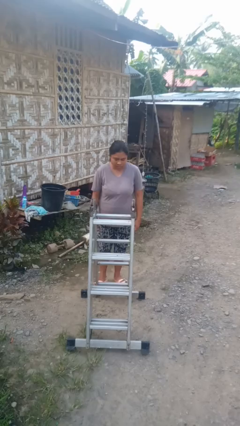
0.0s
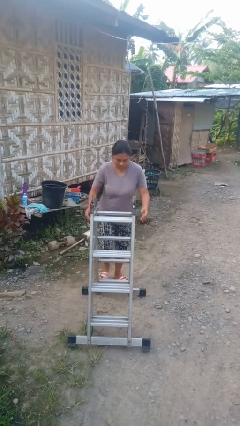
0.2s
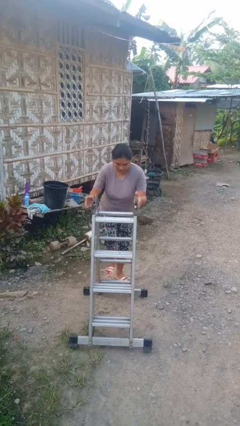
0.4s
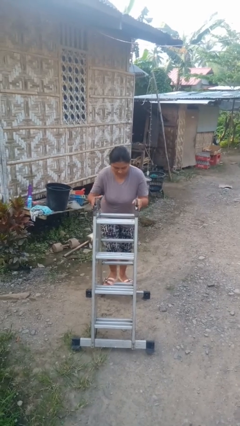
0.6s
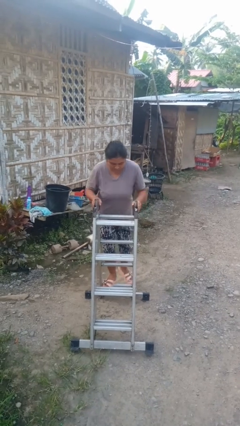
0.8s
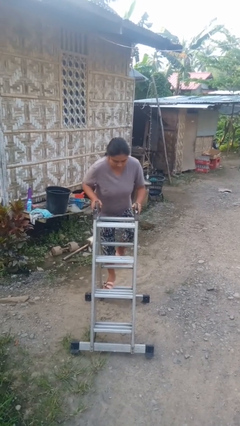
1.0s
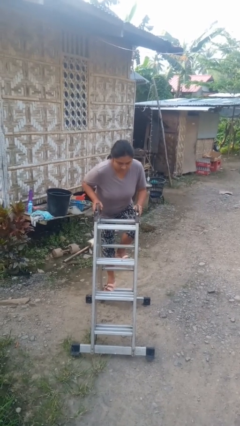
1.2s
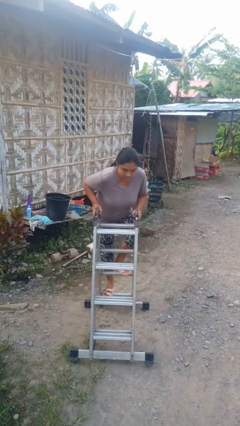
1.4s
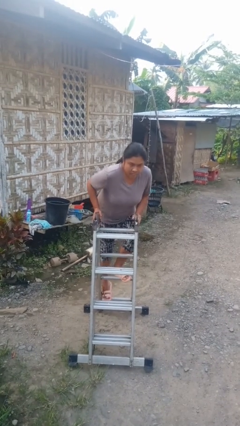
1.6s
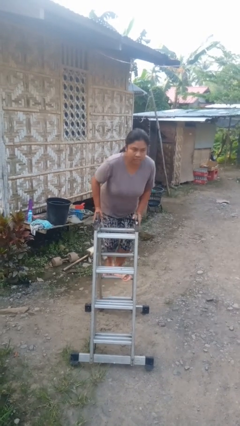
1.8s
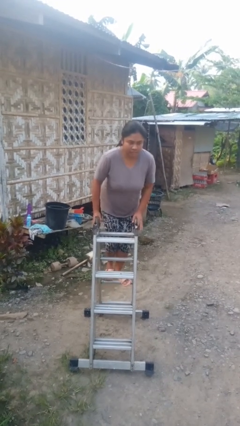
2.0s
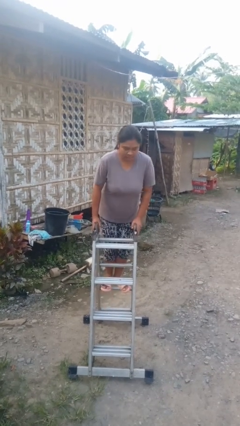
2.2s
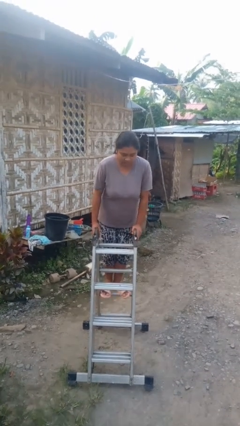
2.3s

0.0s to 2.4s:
person climbs up ladder

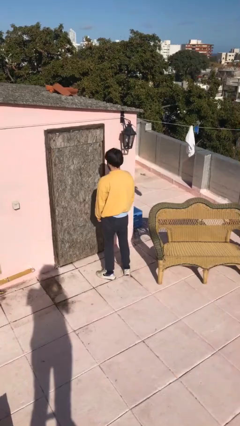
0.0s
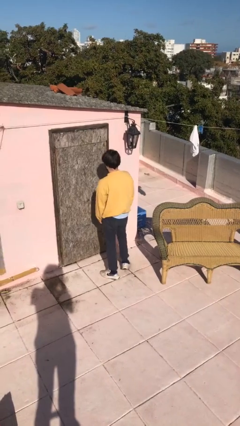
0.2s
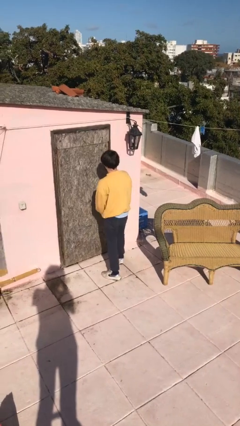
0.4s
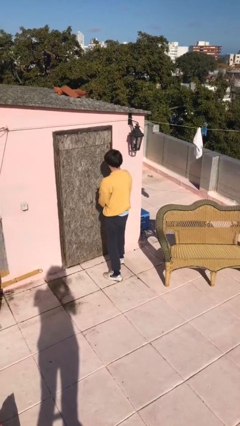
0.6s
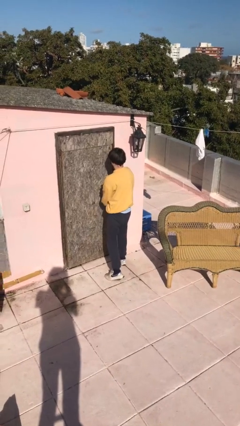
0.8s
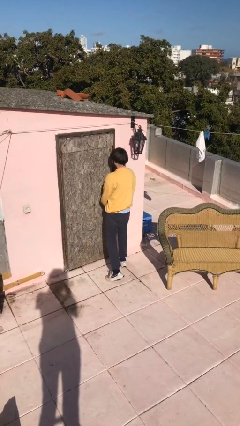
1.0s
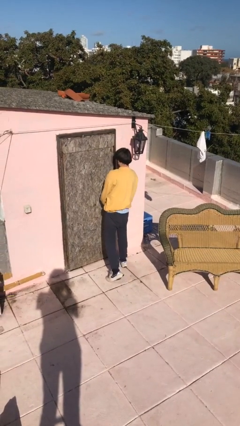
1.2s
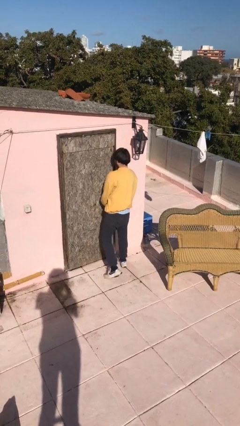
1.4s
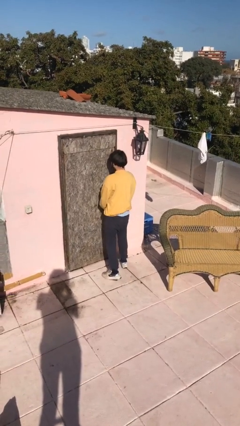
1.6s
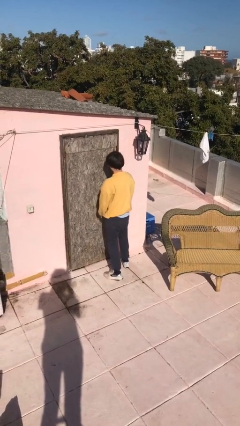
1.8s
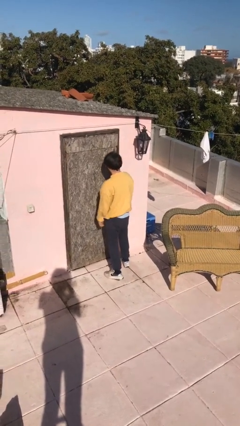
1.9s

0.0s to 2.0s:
person unlocks door with keys

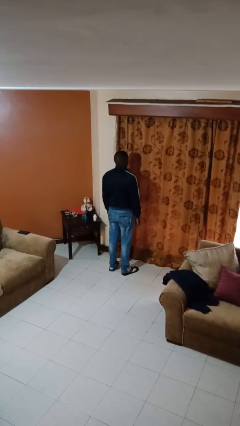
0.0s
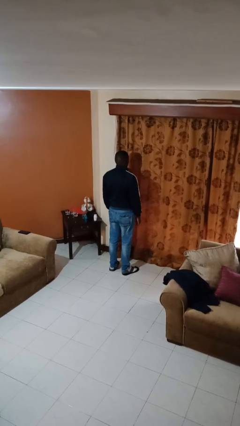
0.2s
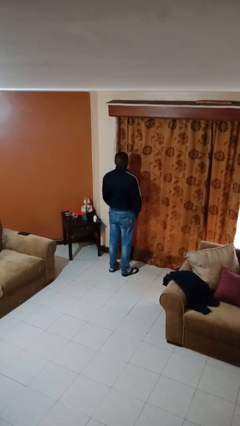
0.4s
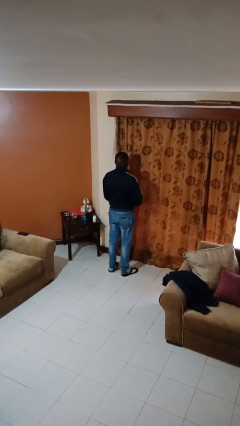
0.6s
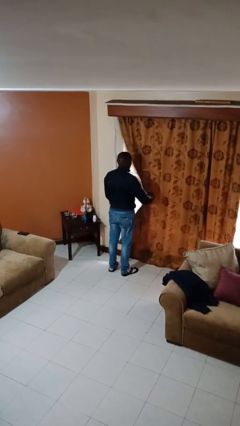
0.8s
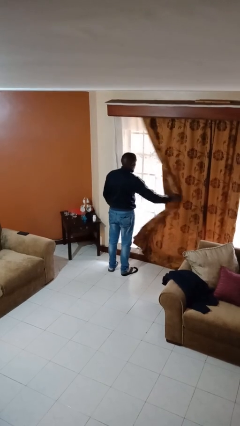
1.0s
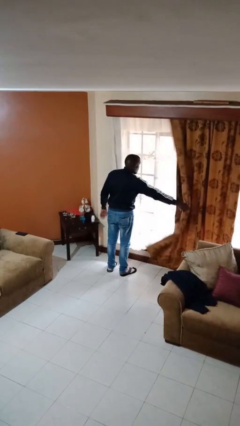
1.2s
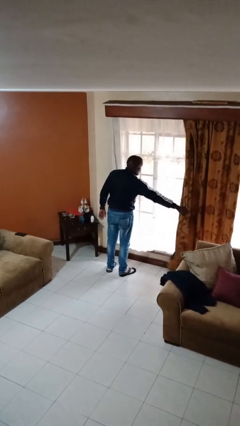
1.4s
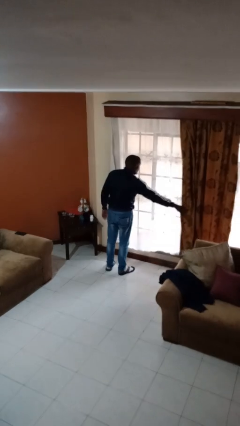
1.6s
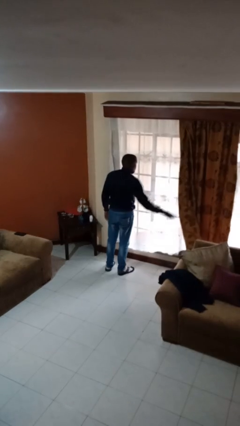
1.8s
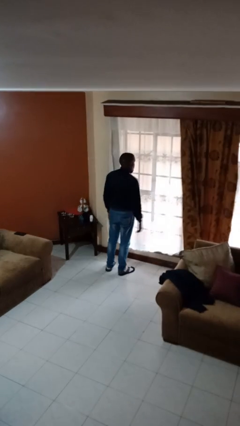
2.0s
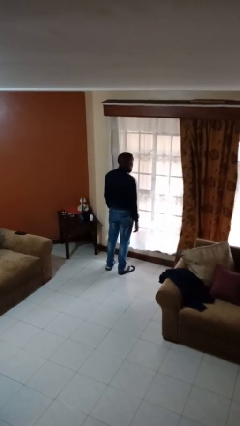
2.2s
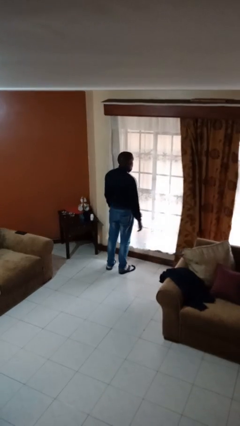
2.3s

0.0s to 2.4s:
person opens curtains

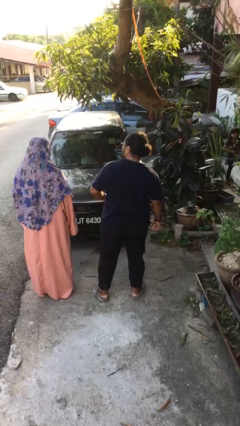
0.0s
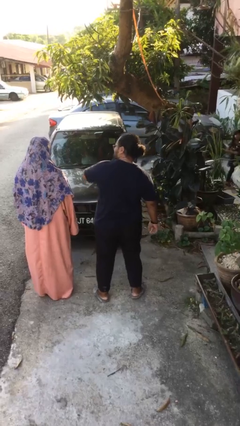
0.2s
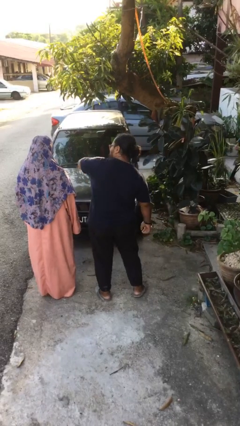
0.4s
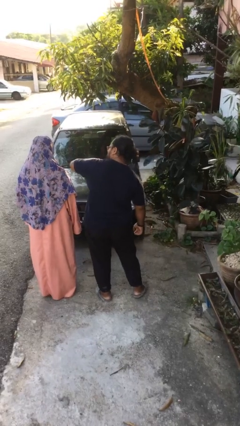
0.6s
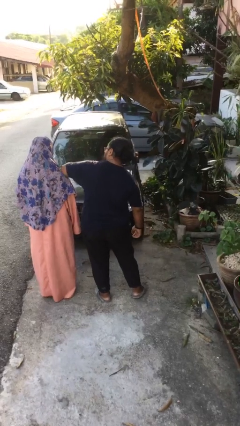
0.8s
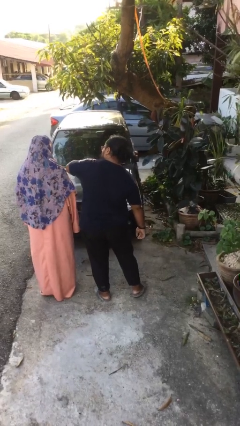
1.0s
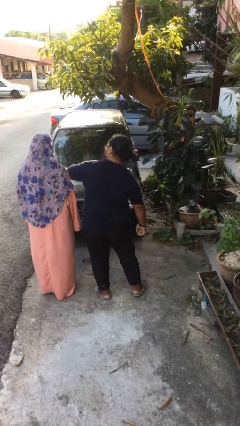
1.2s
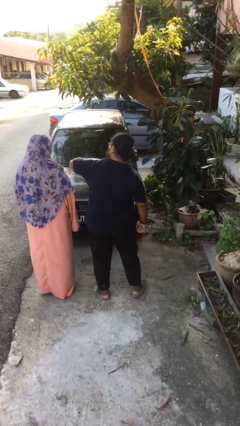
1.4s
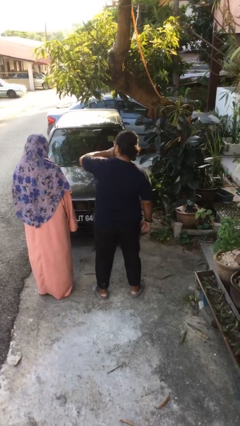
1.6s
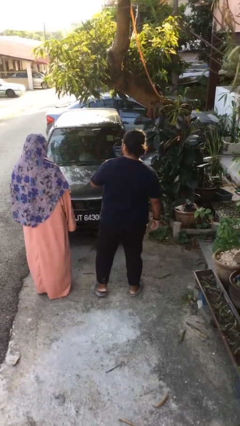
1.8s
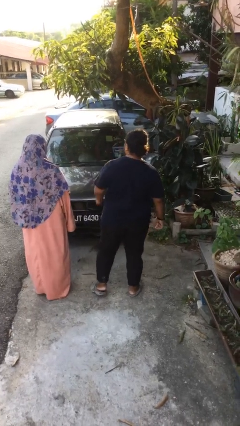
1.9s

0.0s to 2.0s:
person nudges person with elbow

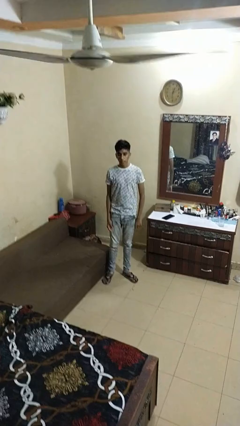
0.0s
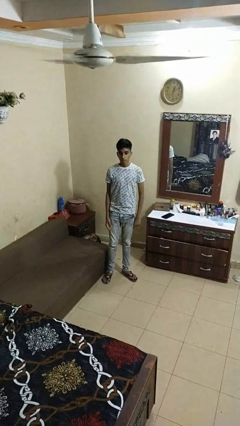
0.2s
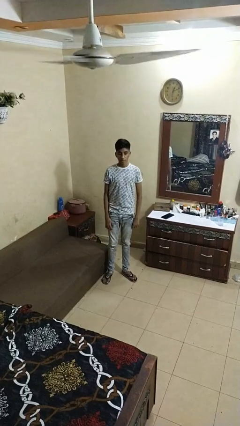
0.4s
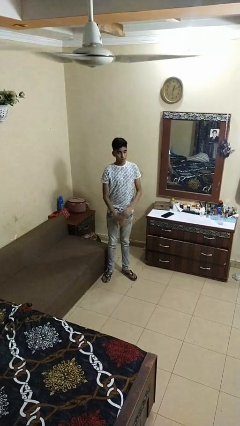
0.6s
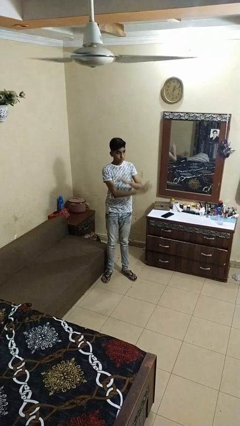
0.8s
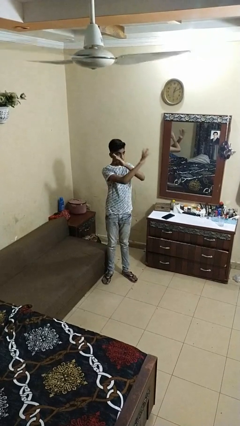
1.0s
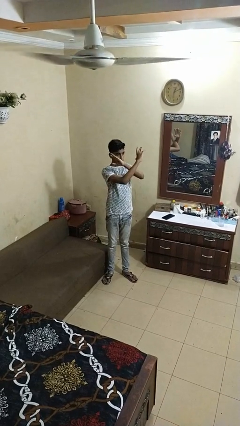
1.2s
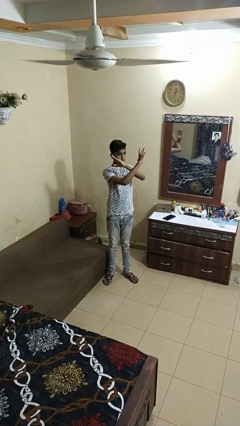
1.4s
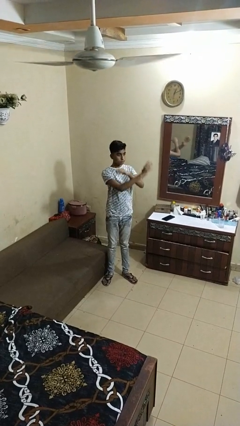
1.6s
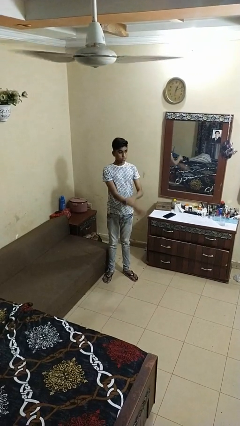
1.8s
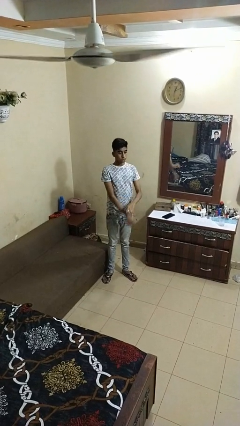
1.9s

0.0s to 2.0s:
person gestures arms x

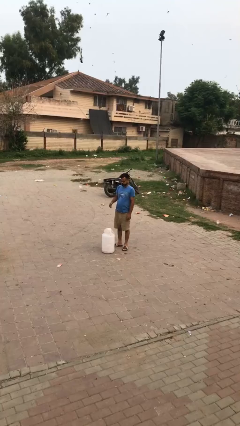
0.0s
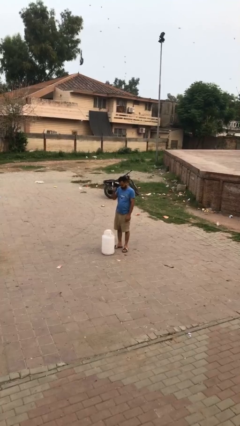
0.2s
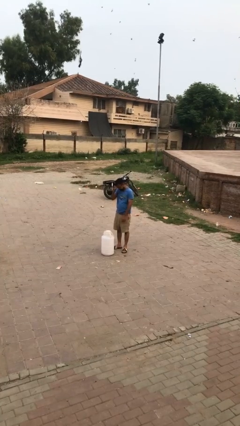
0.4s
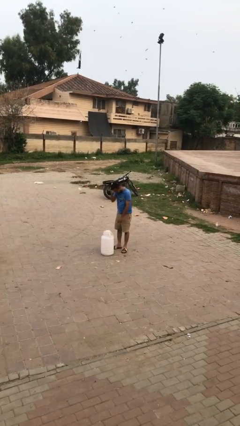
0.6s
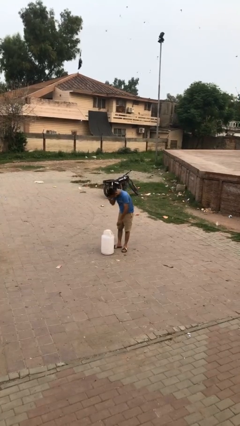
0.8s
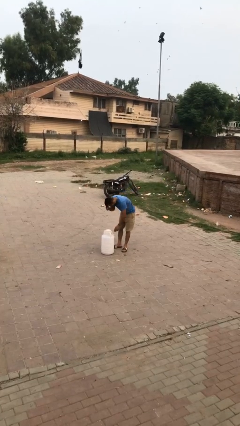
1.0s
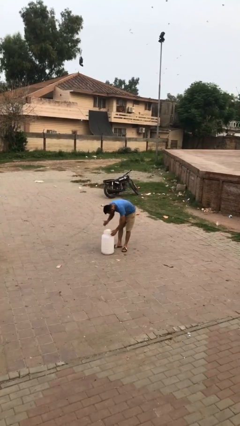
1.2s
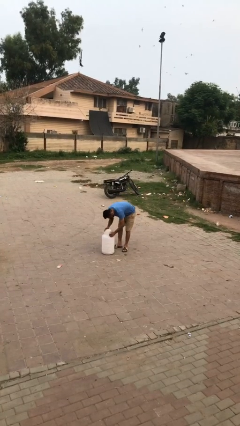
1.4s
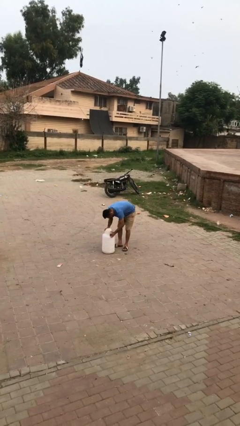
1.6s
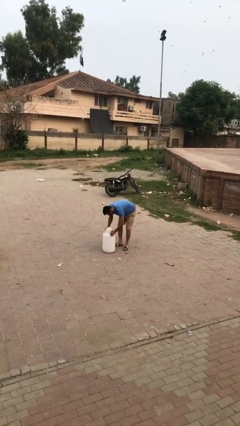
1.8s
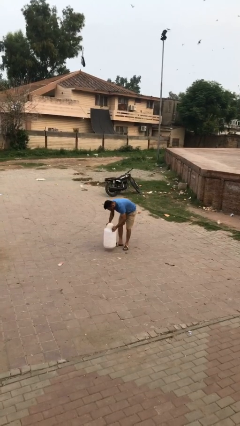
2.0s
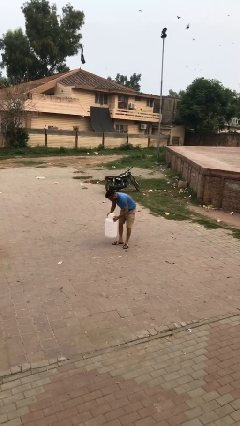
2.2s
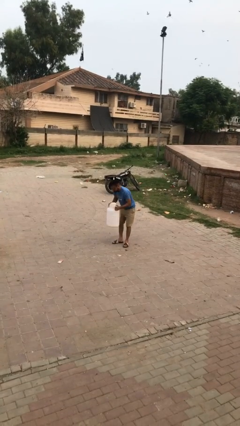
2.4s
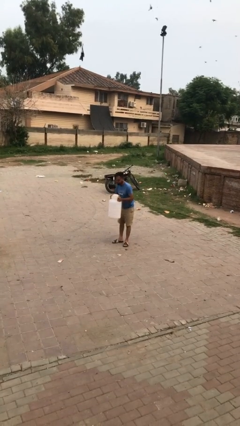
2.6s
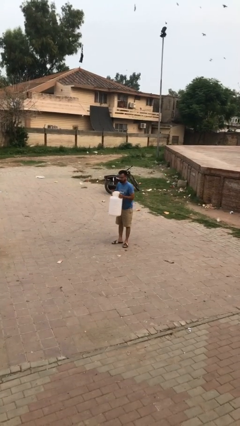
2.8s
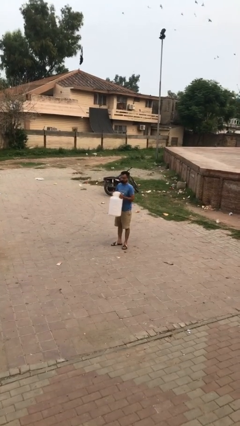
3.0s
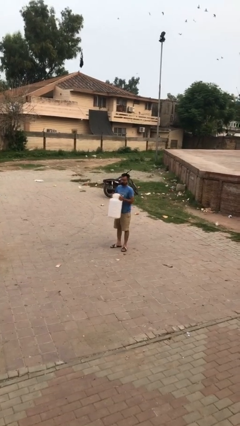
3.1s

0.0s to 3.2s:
person picks up object from floor

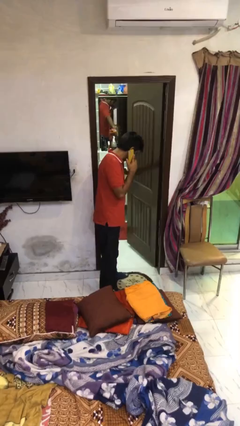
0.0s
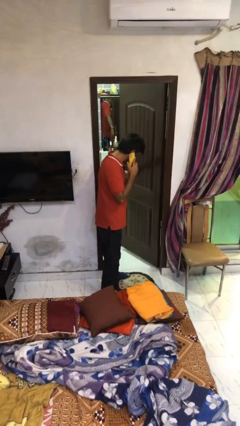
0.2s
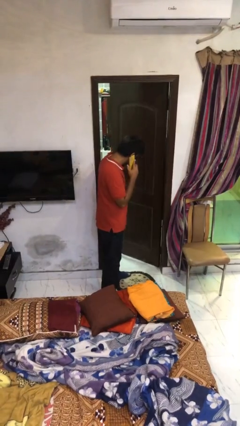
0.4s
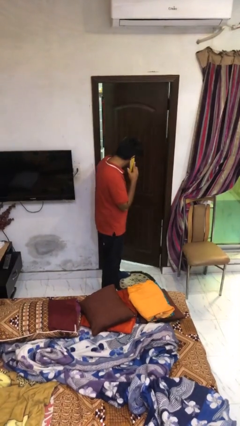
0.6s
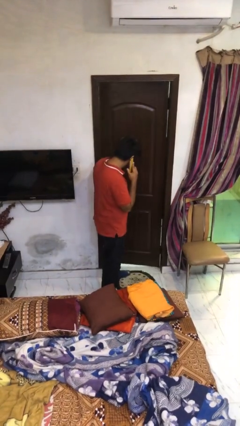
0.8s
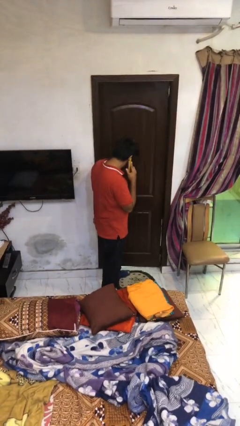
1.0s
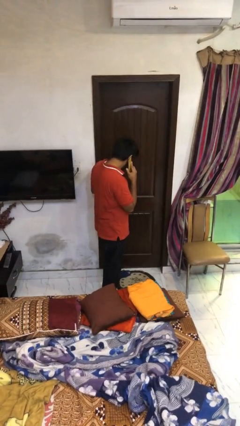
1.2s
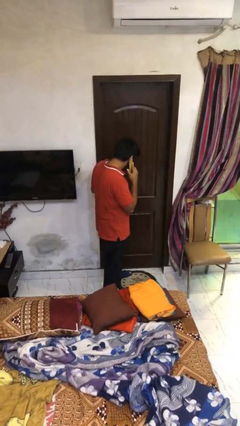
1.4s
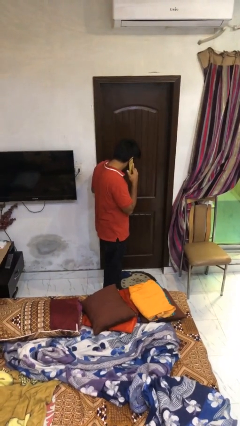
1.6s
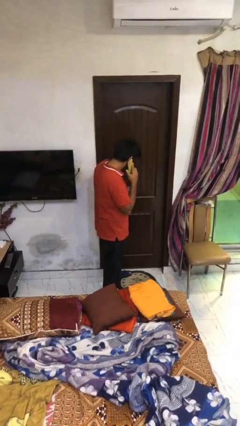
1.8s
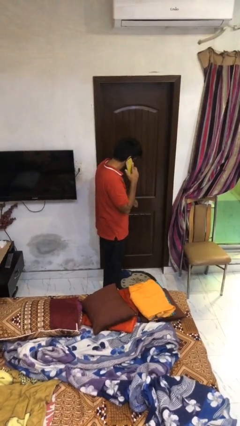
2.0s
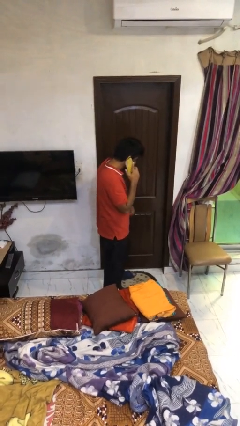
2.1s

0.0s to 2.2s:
person closes facility door

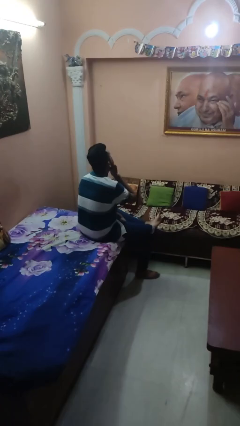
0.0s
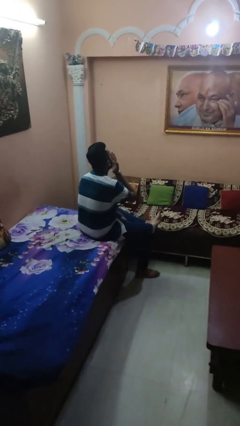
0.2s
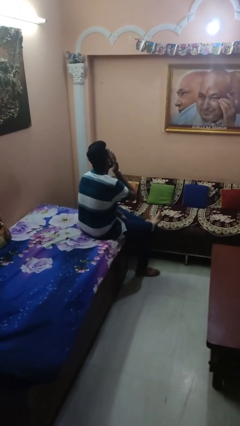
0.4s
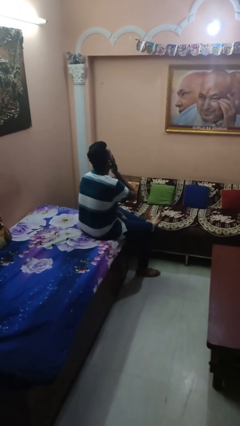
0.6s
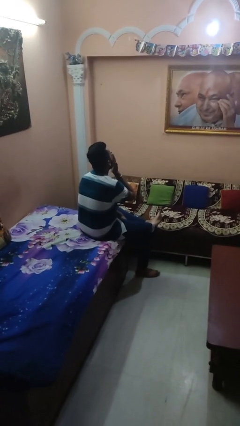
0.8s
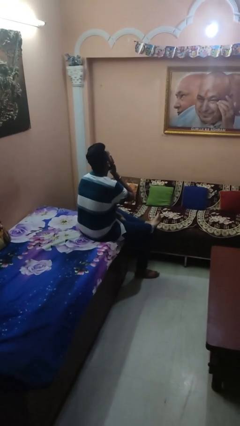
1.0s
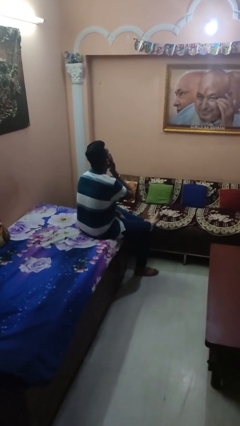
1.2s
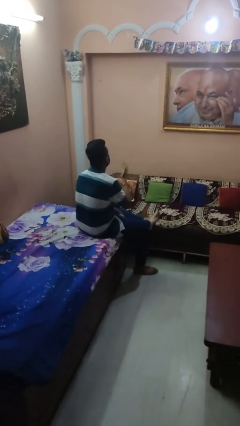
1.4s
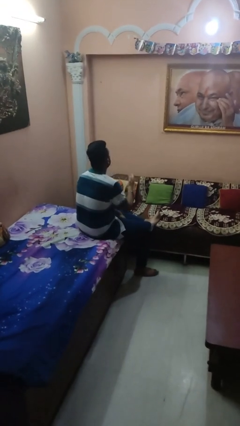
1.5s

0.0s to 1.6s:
person yawns
